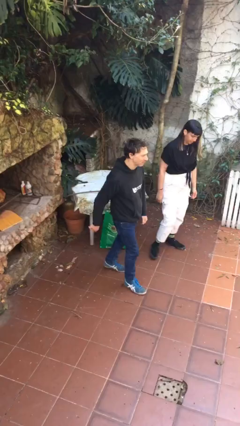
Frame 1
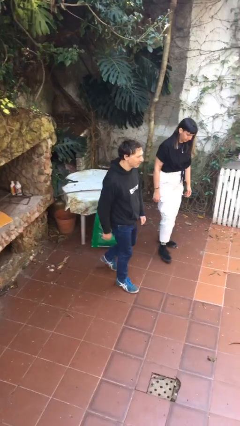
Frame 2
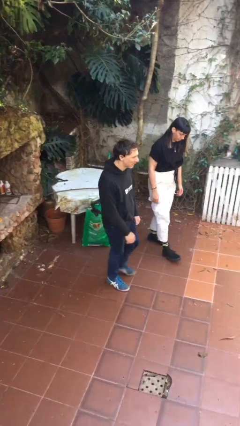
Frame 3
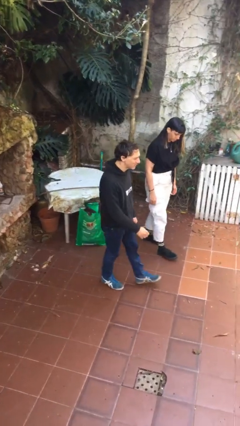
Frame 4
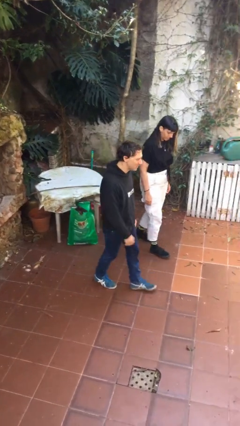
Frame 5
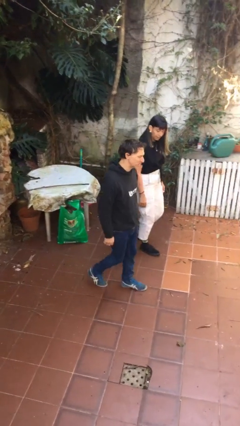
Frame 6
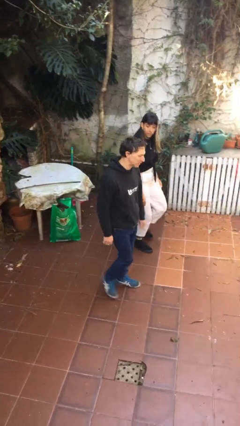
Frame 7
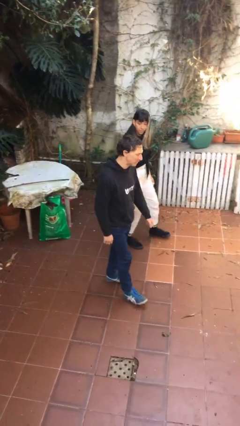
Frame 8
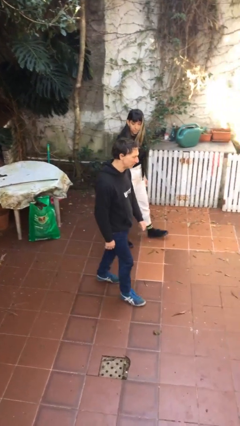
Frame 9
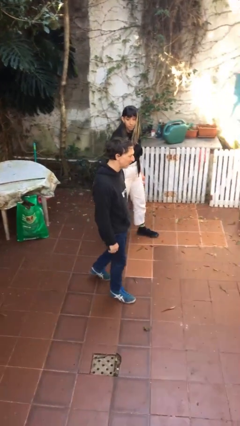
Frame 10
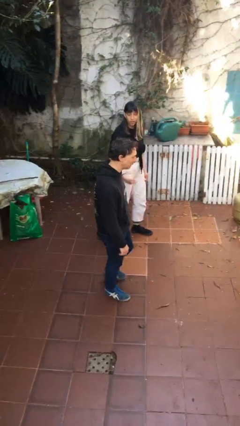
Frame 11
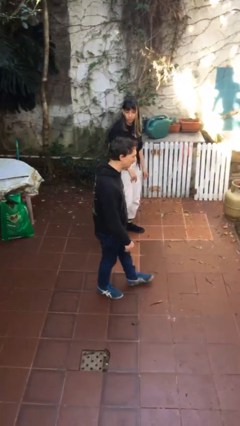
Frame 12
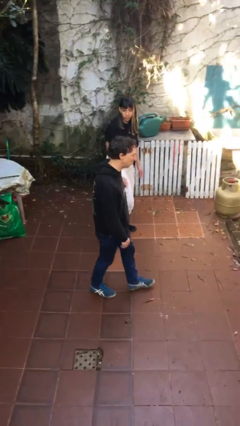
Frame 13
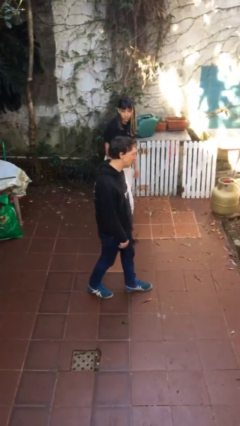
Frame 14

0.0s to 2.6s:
person talks to person

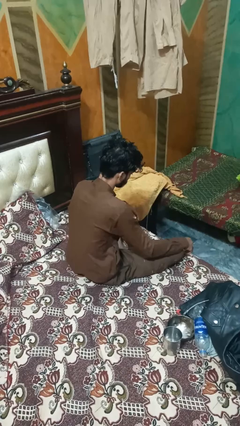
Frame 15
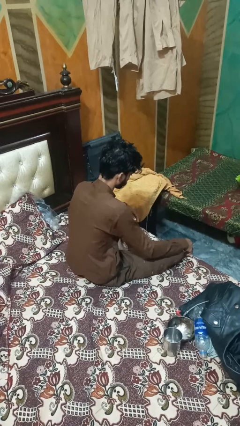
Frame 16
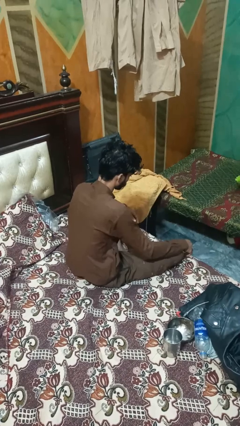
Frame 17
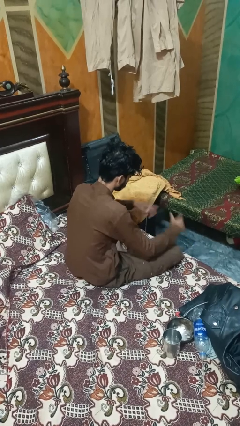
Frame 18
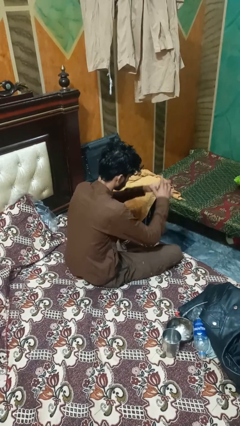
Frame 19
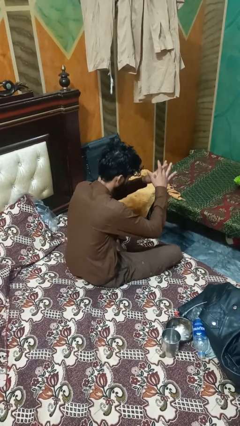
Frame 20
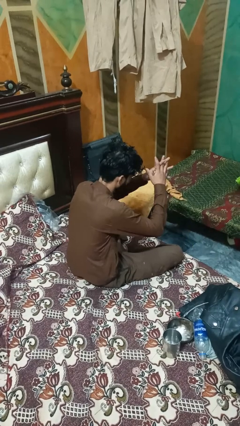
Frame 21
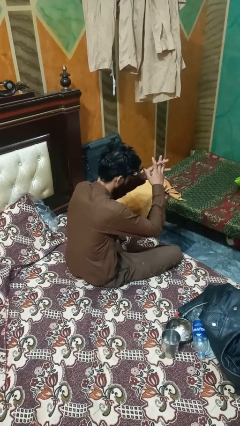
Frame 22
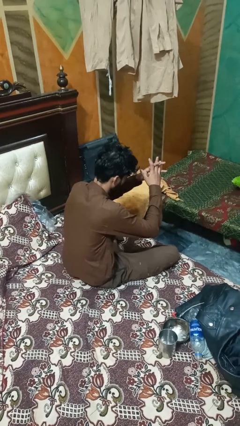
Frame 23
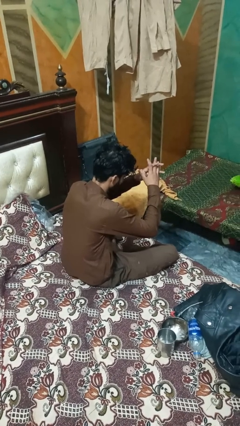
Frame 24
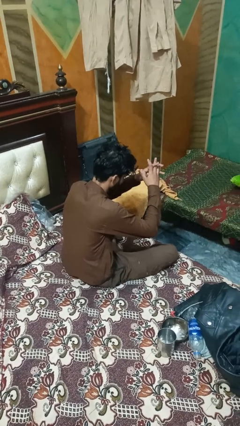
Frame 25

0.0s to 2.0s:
person snaps fingers

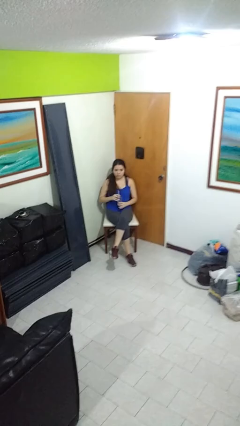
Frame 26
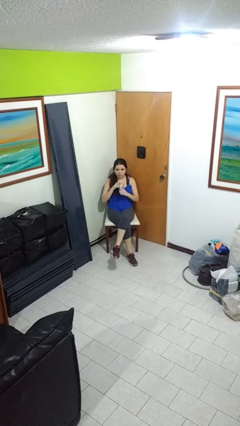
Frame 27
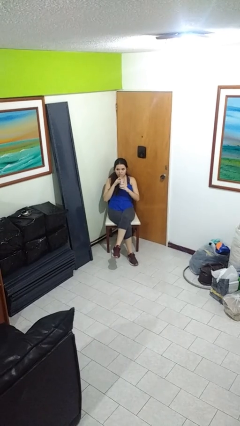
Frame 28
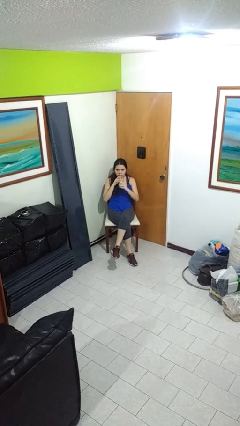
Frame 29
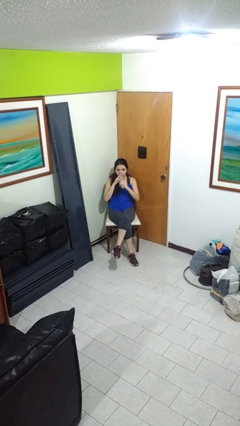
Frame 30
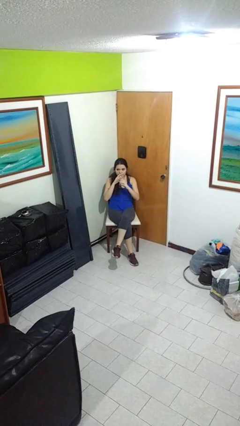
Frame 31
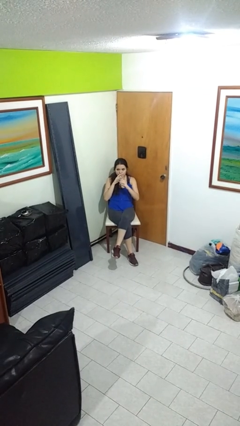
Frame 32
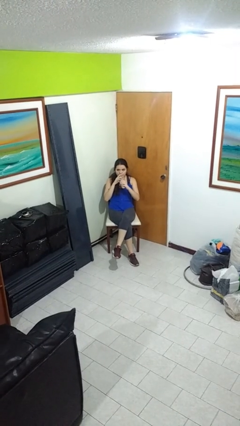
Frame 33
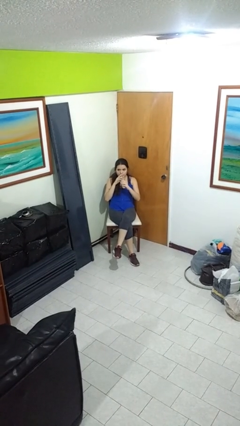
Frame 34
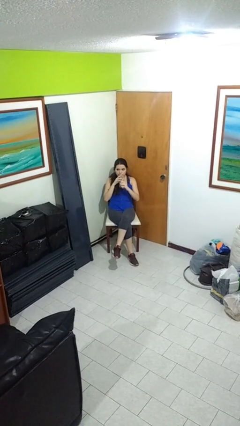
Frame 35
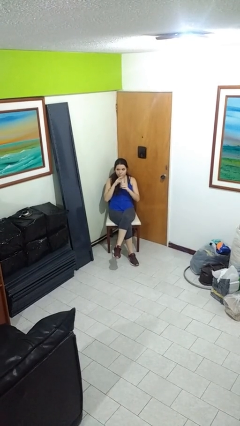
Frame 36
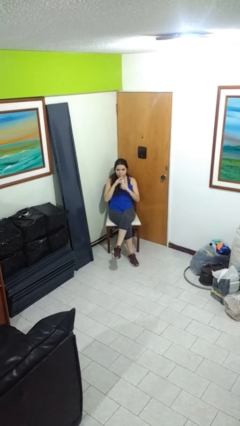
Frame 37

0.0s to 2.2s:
person drinks from straw

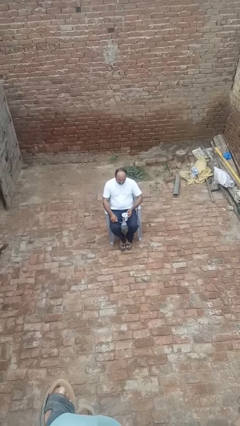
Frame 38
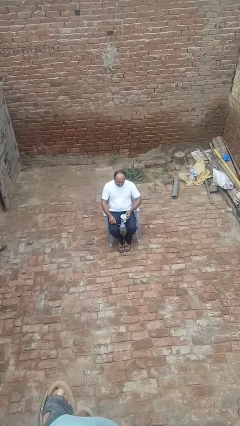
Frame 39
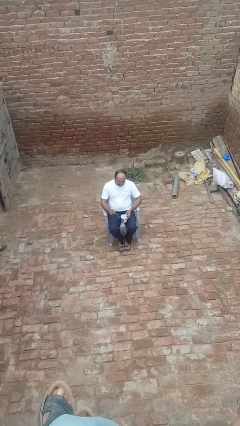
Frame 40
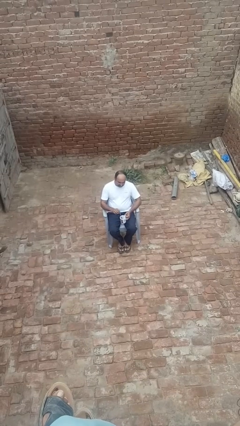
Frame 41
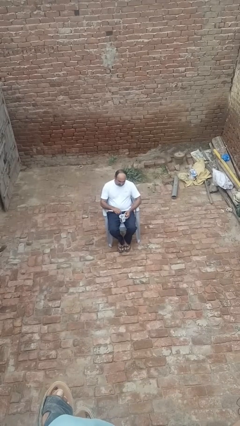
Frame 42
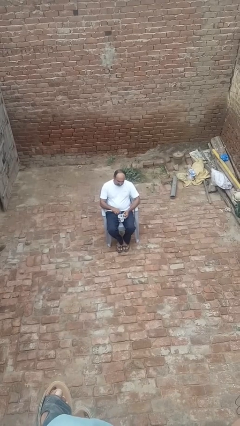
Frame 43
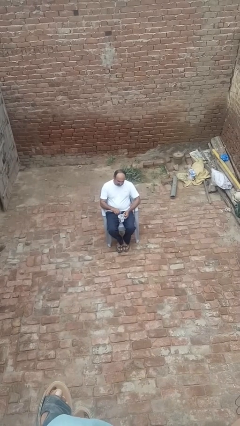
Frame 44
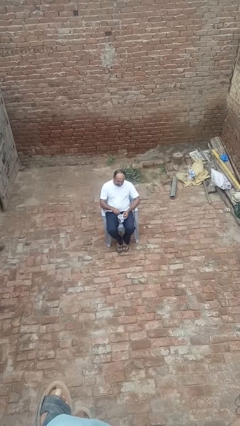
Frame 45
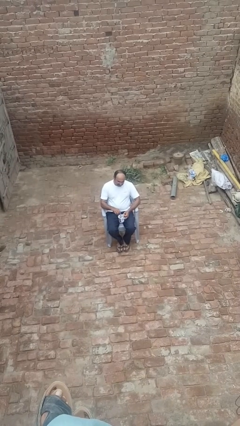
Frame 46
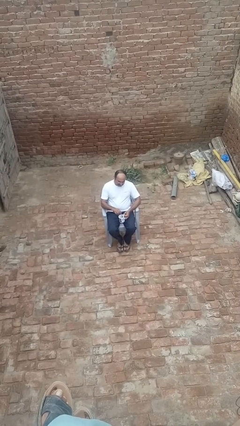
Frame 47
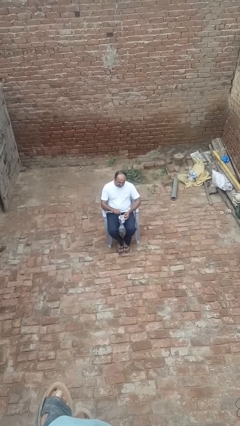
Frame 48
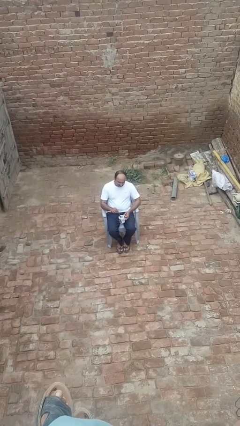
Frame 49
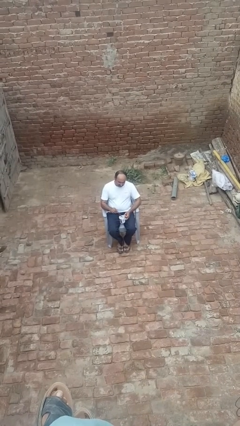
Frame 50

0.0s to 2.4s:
person stirs mug

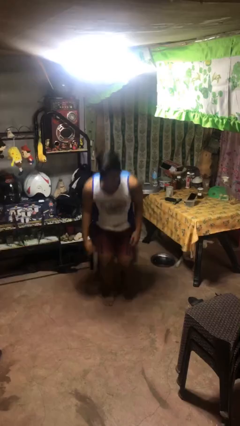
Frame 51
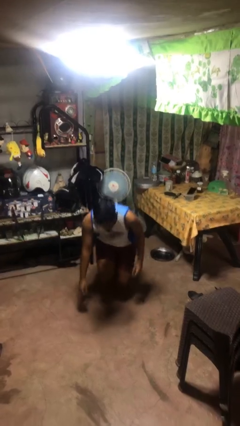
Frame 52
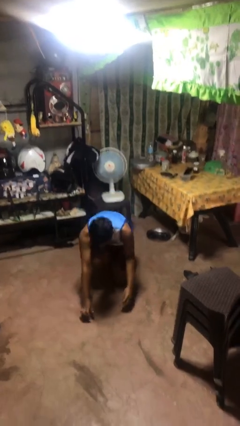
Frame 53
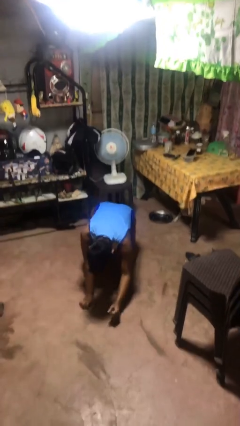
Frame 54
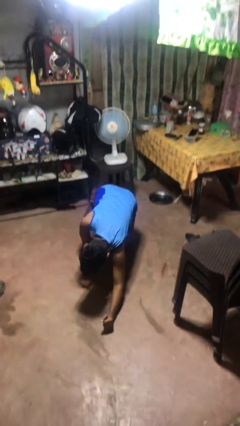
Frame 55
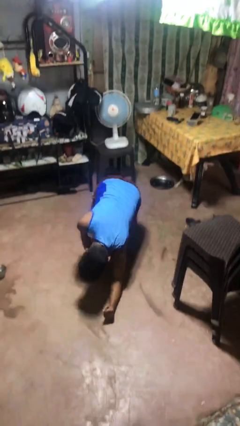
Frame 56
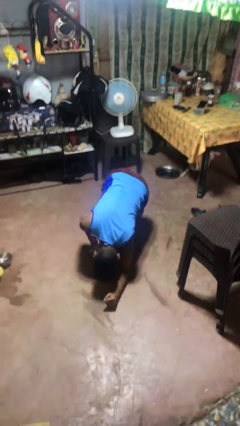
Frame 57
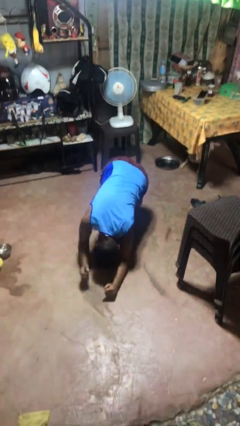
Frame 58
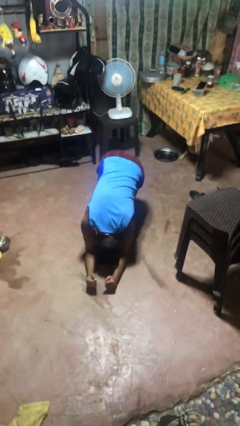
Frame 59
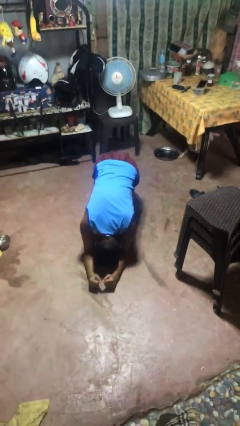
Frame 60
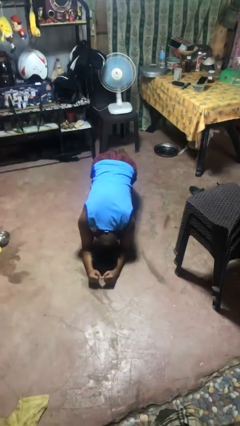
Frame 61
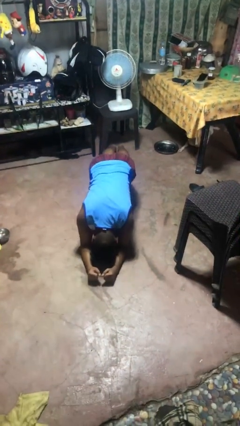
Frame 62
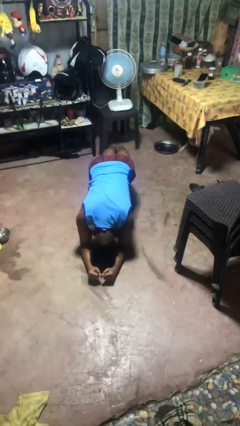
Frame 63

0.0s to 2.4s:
person exercises with plank

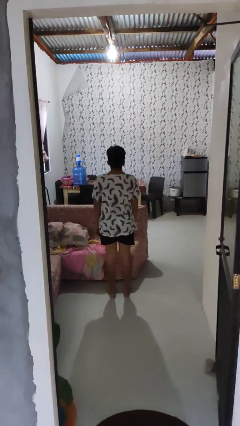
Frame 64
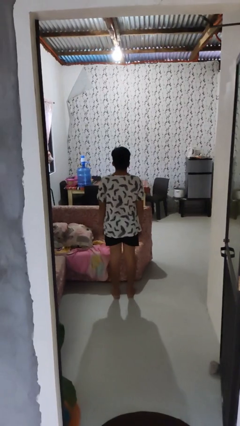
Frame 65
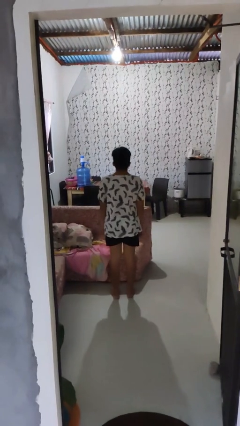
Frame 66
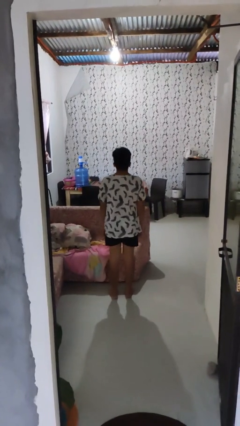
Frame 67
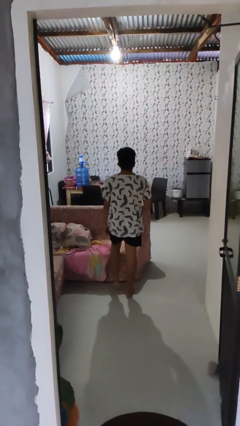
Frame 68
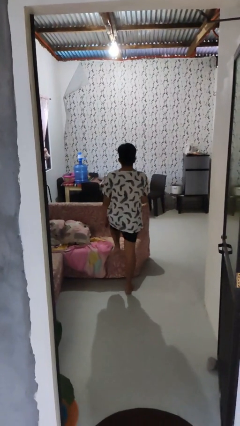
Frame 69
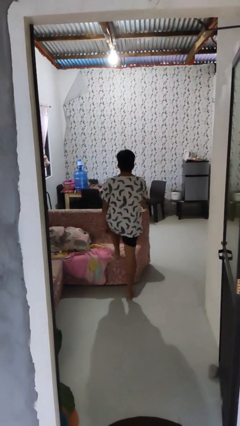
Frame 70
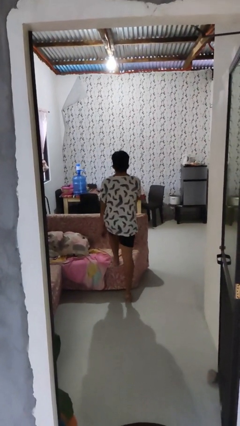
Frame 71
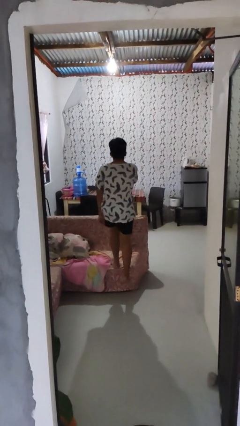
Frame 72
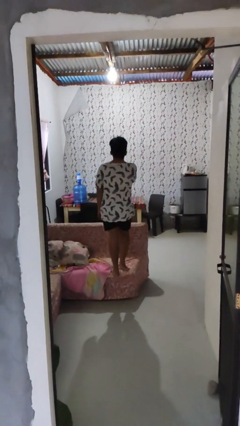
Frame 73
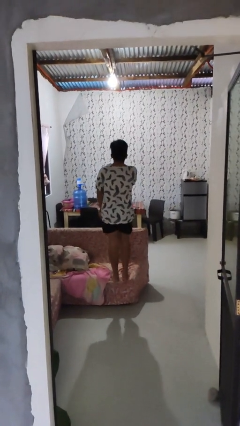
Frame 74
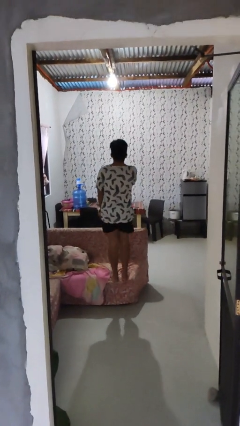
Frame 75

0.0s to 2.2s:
person climbs on couch

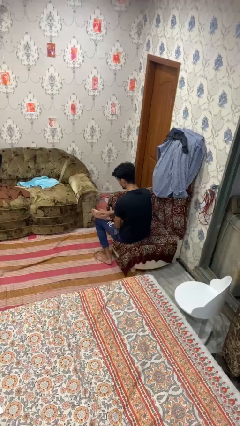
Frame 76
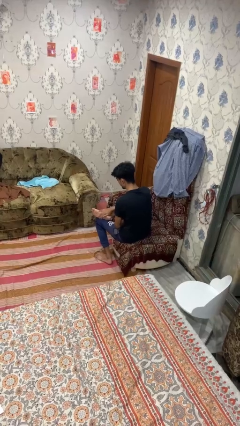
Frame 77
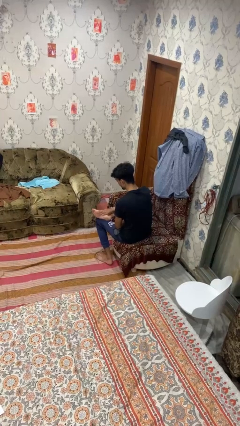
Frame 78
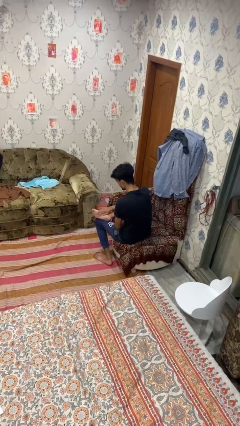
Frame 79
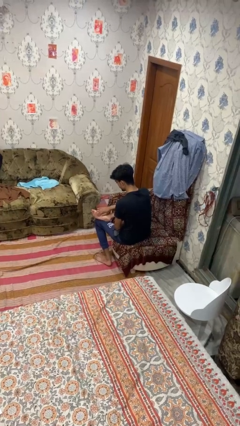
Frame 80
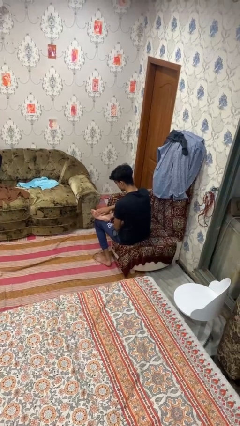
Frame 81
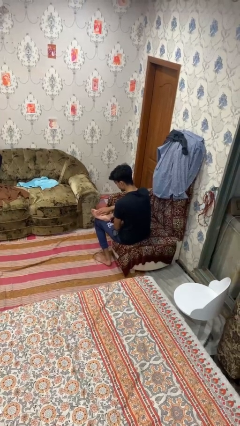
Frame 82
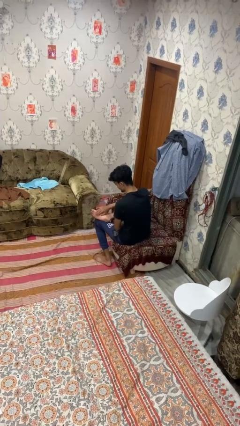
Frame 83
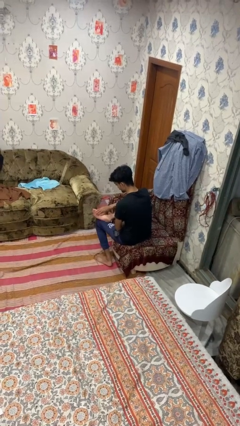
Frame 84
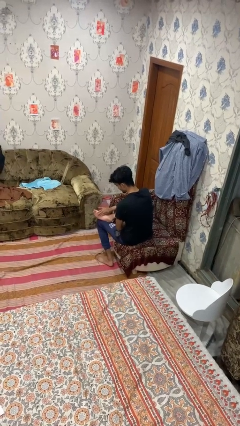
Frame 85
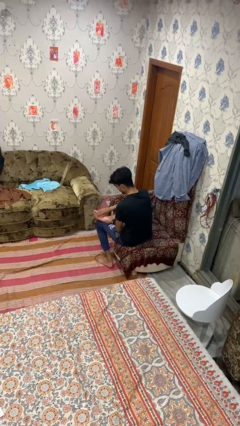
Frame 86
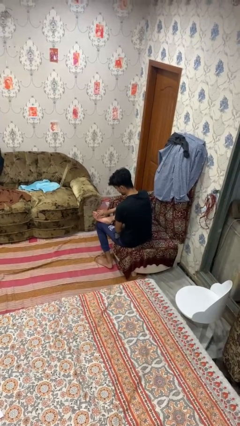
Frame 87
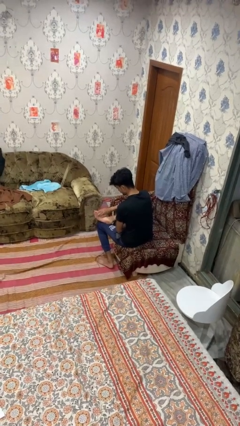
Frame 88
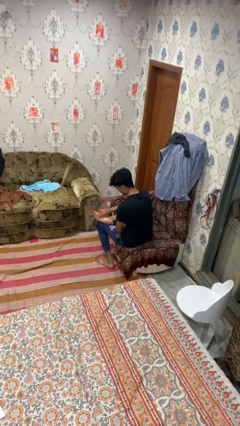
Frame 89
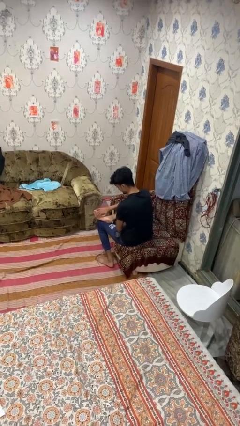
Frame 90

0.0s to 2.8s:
person rubs foot
